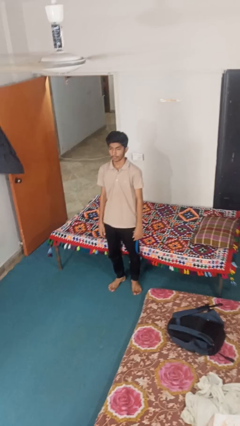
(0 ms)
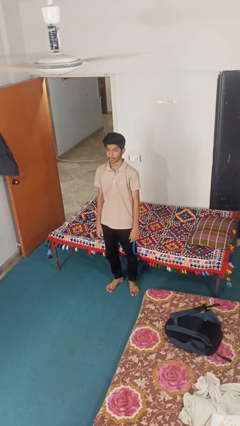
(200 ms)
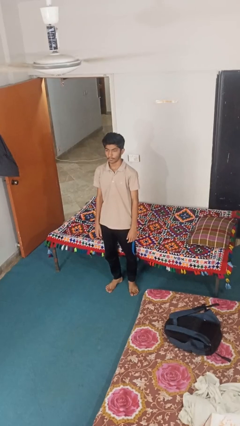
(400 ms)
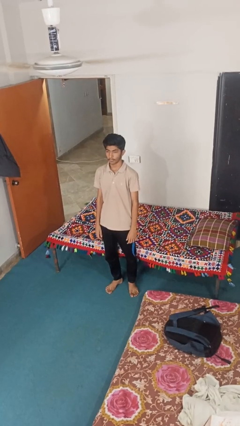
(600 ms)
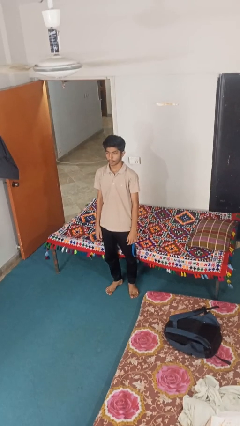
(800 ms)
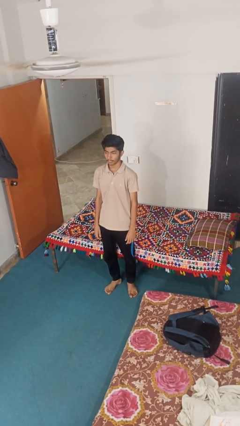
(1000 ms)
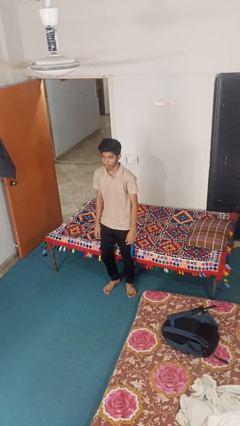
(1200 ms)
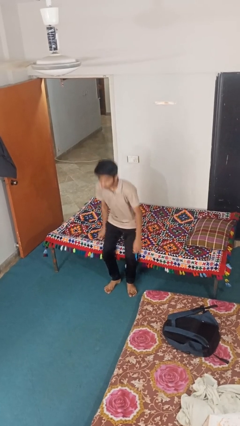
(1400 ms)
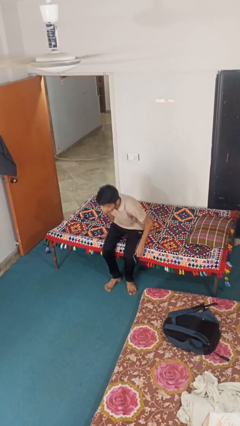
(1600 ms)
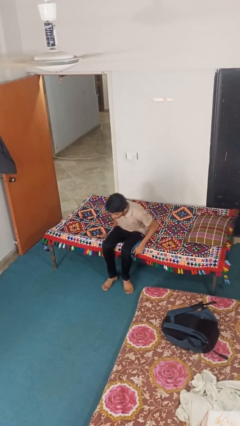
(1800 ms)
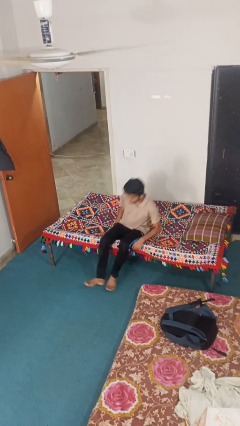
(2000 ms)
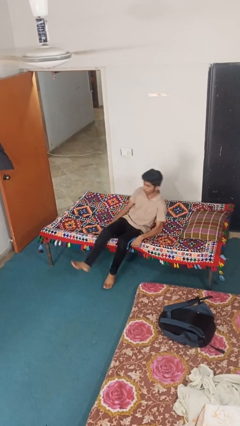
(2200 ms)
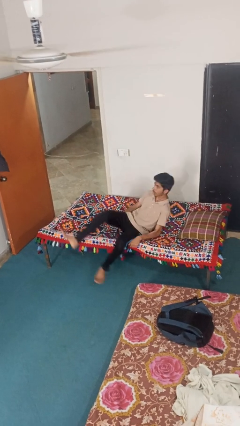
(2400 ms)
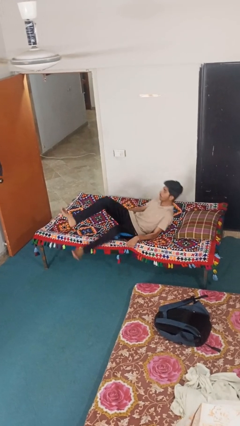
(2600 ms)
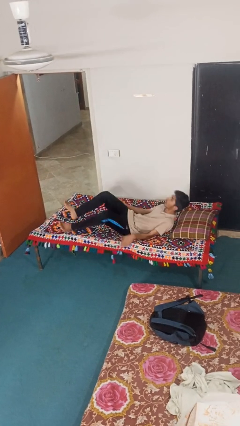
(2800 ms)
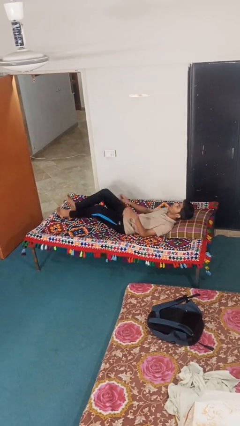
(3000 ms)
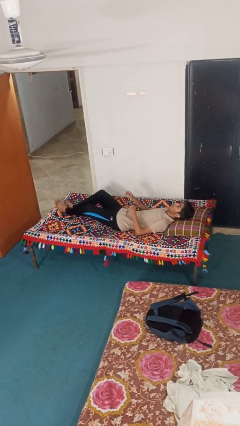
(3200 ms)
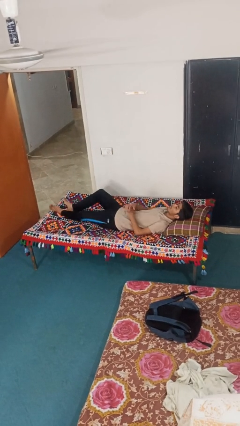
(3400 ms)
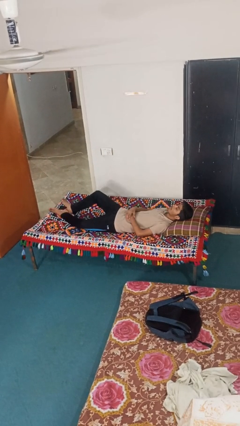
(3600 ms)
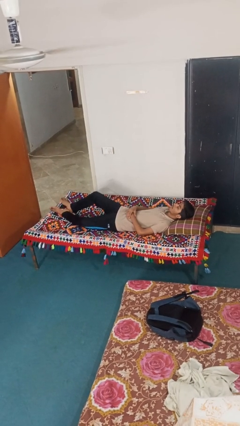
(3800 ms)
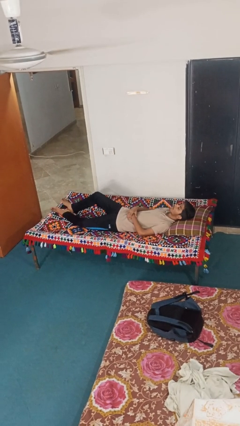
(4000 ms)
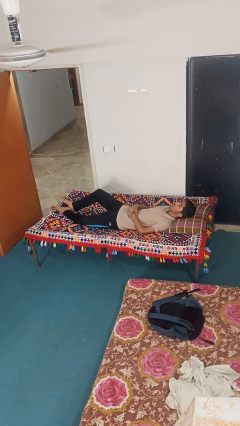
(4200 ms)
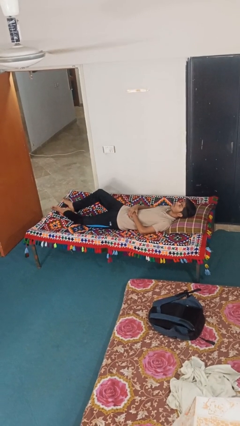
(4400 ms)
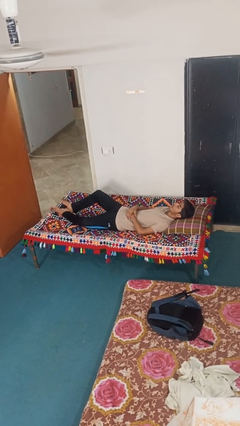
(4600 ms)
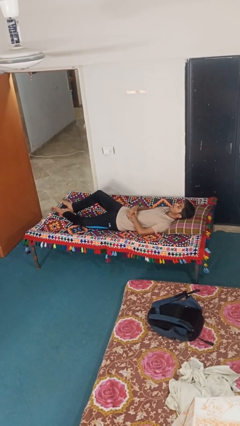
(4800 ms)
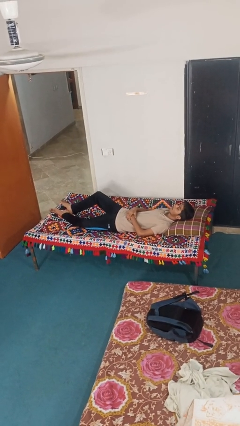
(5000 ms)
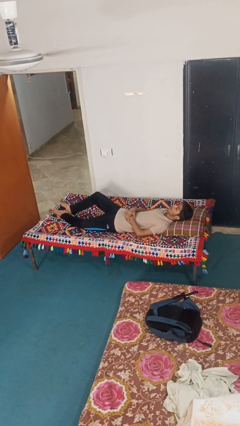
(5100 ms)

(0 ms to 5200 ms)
person lies down on bed

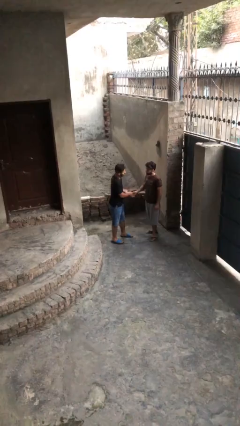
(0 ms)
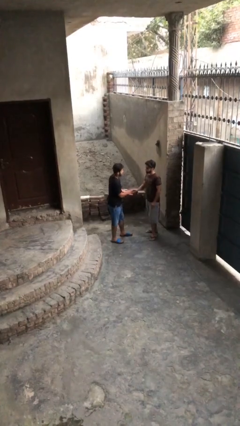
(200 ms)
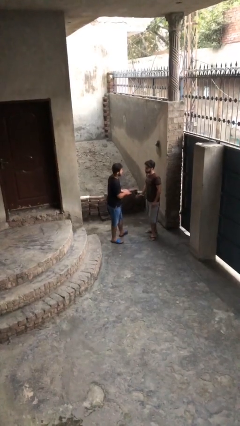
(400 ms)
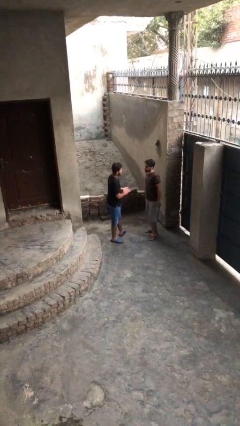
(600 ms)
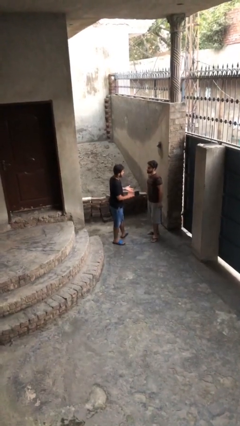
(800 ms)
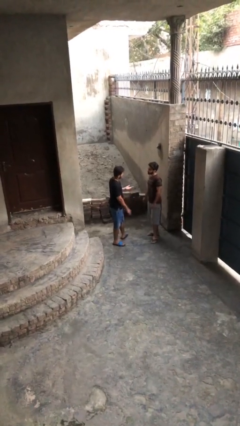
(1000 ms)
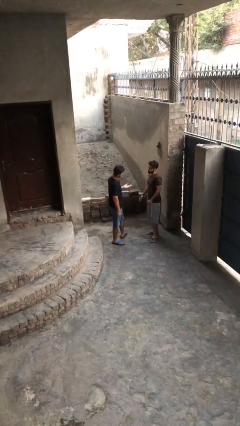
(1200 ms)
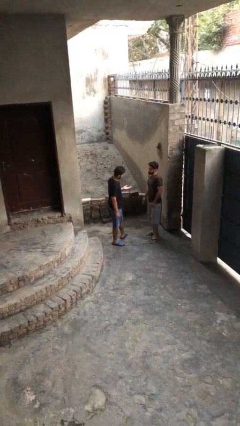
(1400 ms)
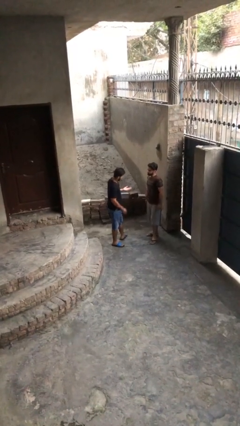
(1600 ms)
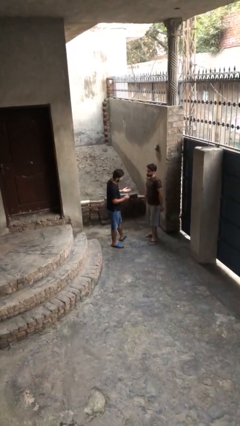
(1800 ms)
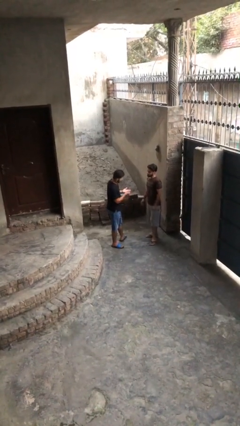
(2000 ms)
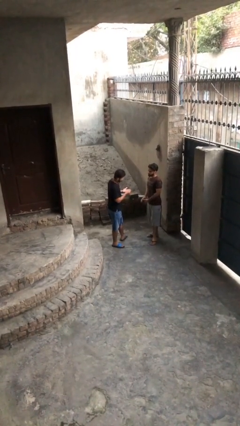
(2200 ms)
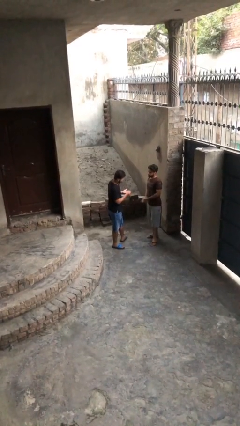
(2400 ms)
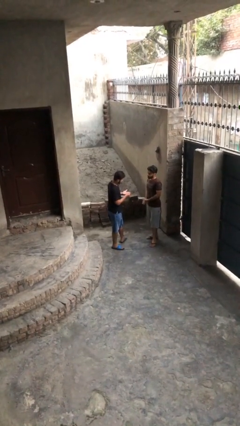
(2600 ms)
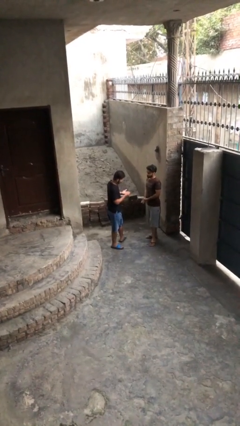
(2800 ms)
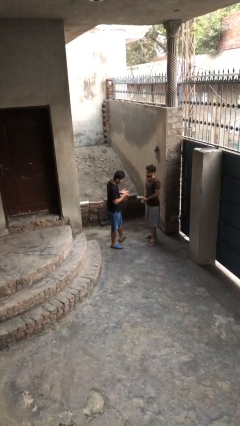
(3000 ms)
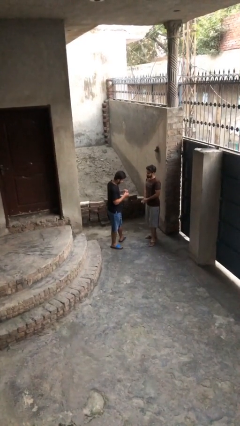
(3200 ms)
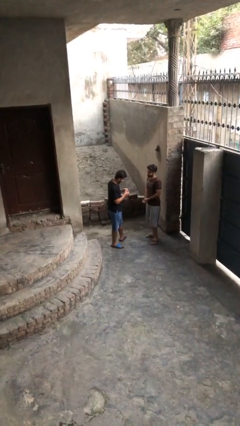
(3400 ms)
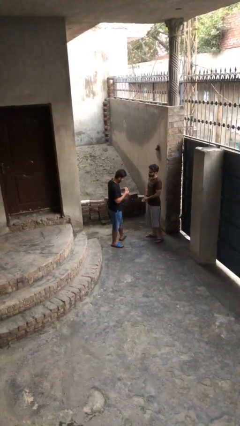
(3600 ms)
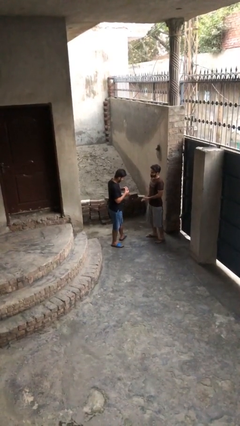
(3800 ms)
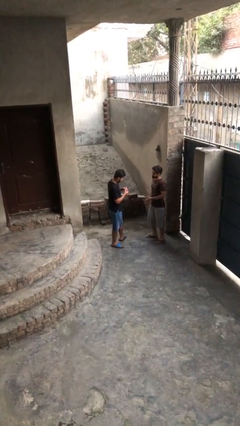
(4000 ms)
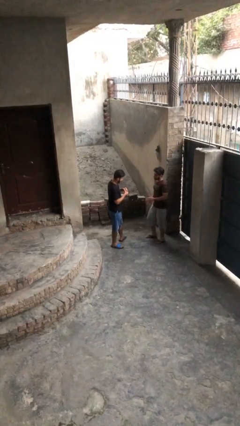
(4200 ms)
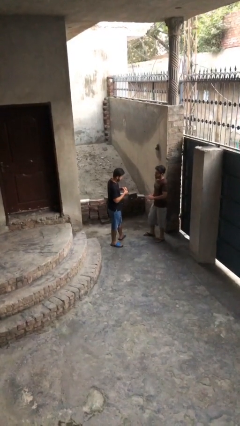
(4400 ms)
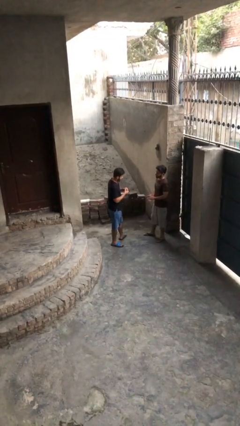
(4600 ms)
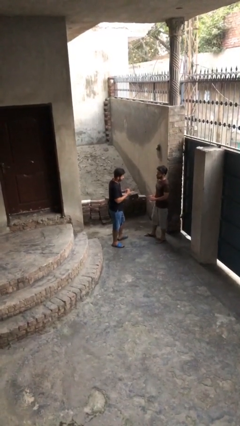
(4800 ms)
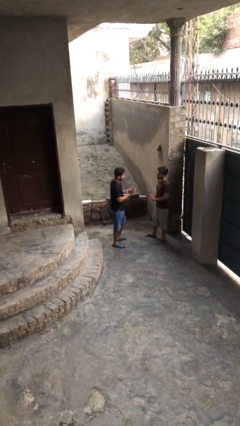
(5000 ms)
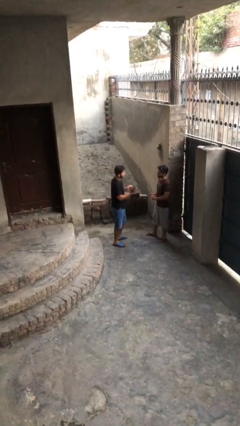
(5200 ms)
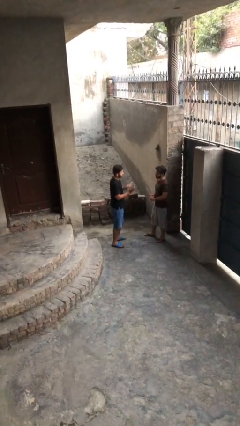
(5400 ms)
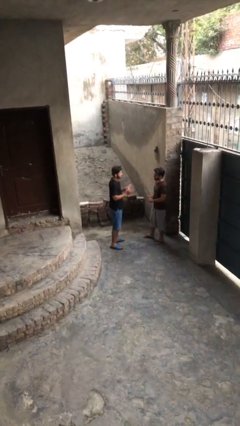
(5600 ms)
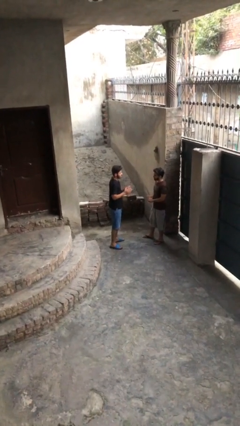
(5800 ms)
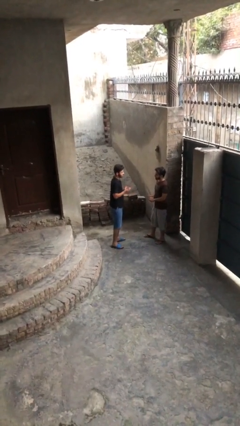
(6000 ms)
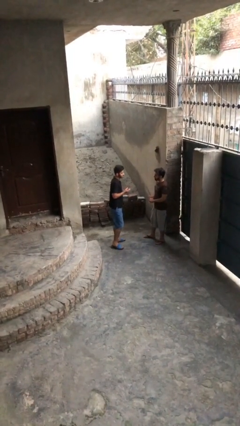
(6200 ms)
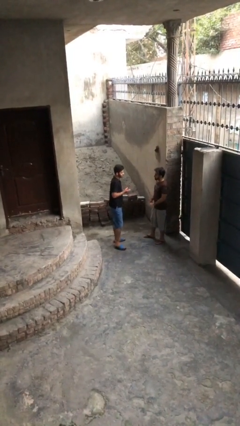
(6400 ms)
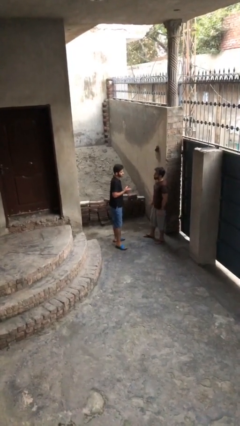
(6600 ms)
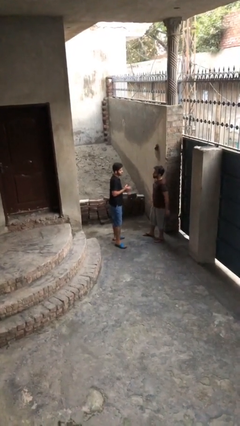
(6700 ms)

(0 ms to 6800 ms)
person talks to person

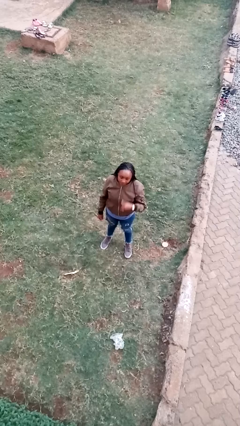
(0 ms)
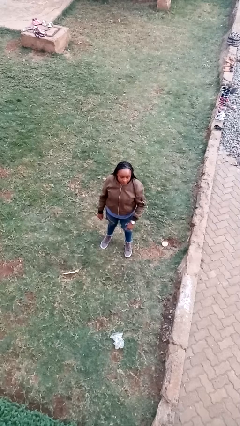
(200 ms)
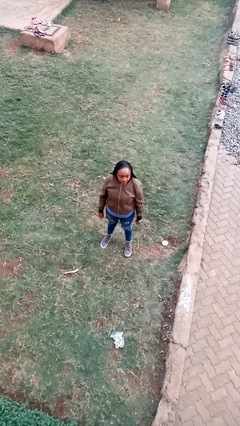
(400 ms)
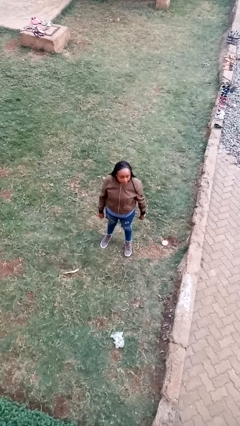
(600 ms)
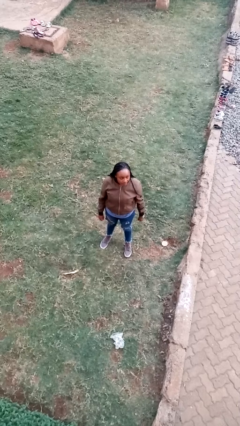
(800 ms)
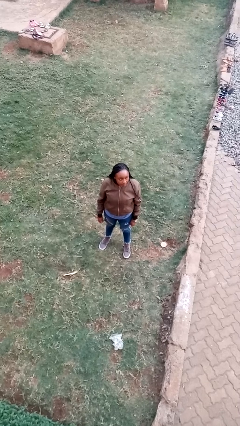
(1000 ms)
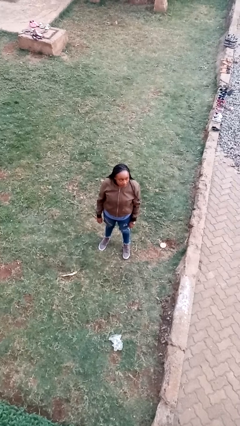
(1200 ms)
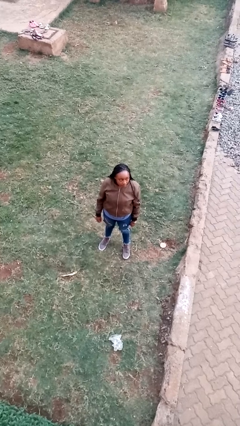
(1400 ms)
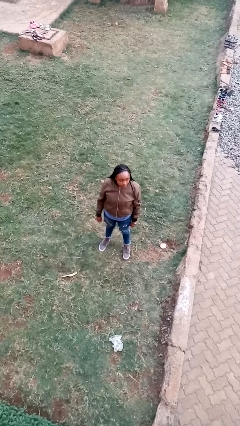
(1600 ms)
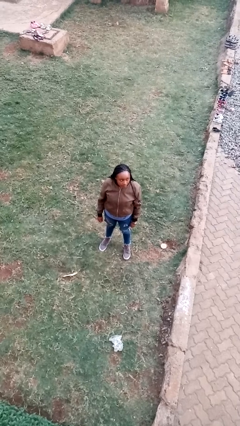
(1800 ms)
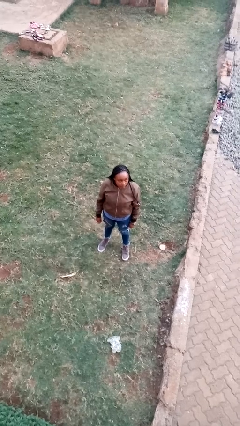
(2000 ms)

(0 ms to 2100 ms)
person gestures call me

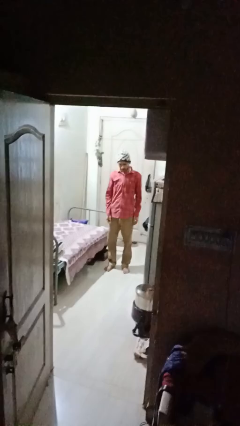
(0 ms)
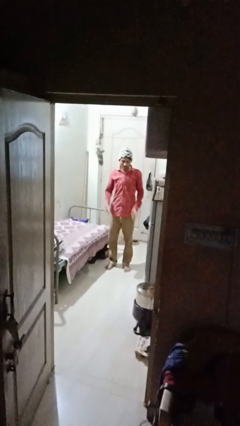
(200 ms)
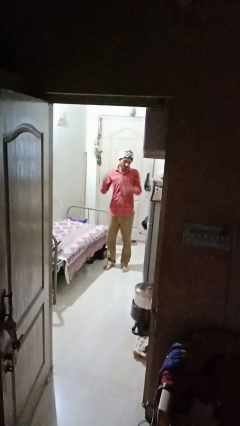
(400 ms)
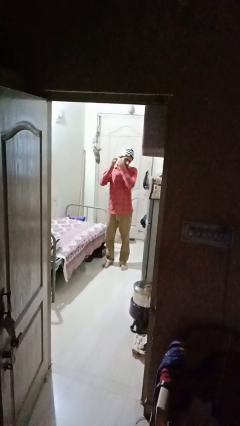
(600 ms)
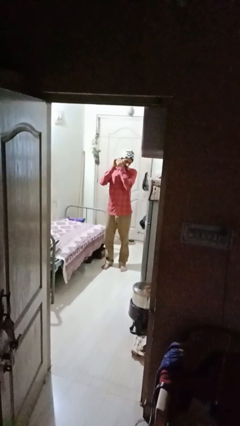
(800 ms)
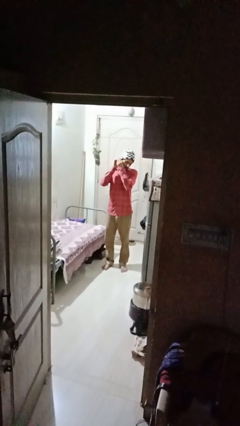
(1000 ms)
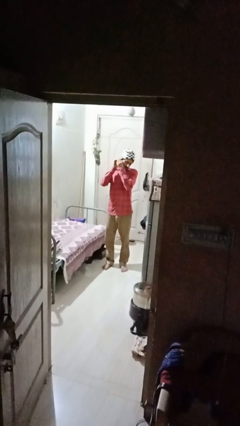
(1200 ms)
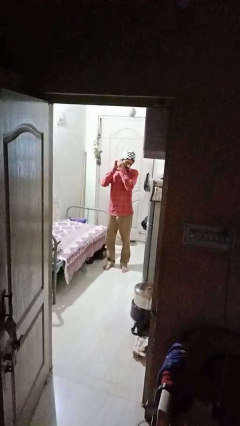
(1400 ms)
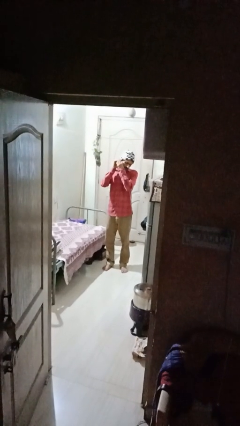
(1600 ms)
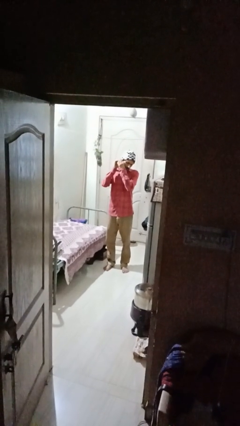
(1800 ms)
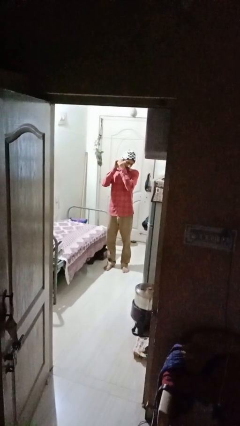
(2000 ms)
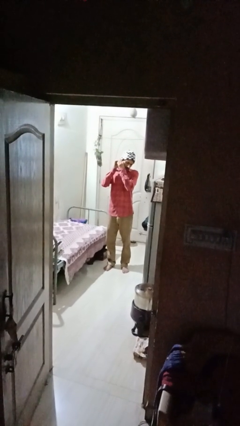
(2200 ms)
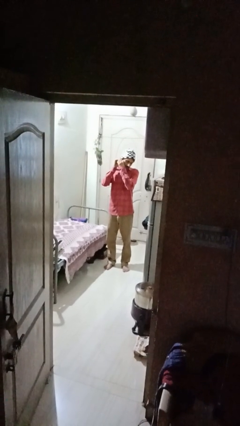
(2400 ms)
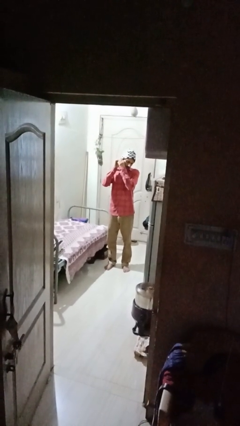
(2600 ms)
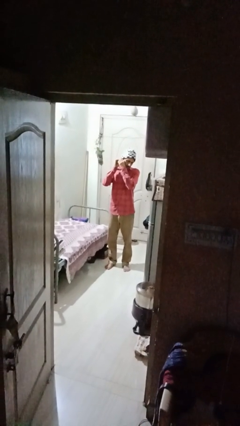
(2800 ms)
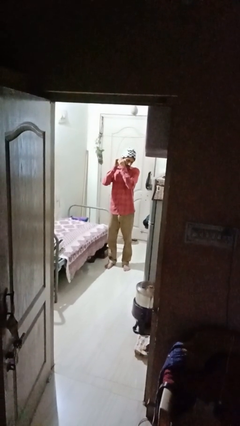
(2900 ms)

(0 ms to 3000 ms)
person puts on earrings

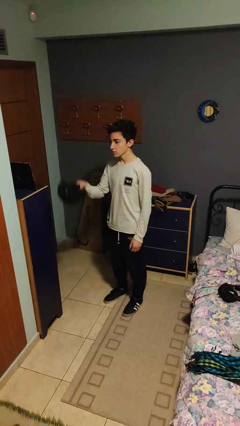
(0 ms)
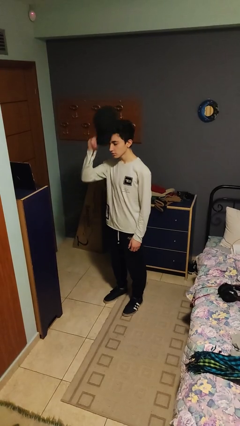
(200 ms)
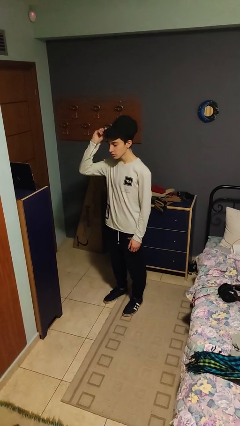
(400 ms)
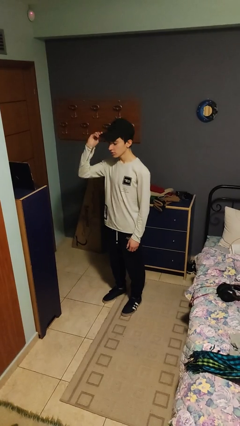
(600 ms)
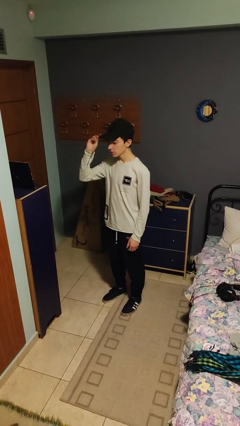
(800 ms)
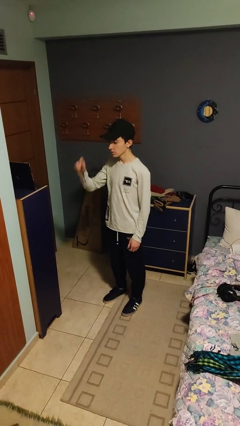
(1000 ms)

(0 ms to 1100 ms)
person puts on hat
